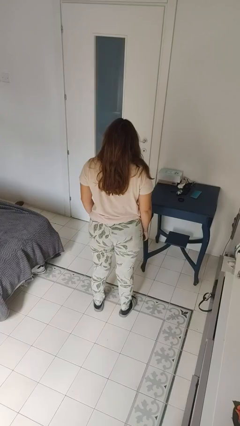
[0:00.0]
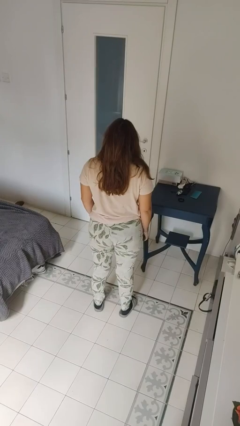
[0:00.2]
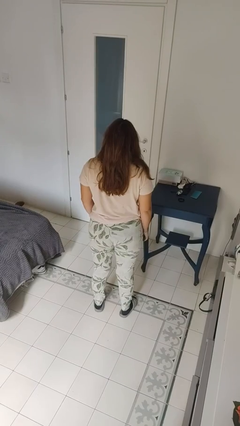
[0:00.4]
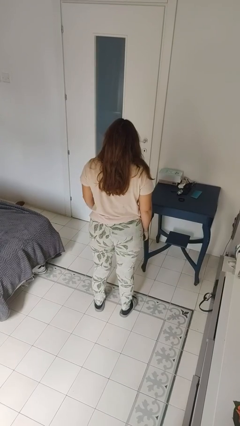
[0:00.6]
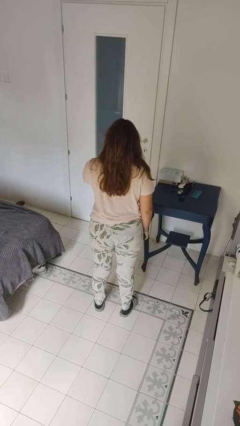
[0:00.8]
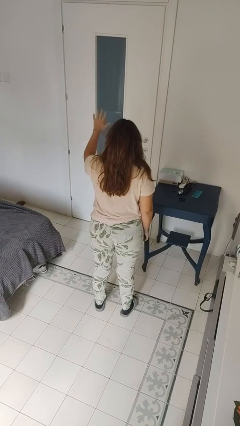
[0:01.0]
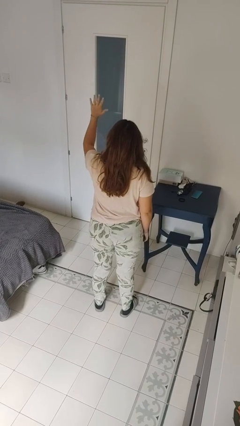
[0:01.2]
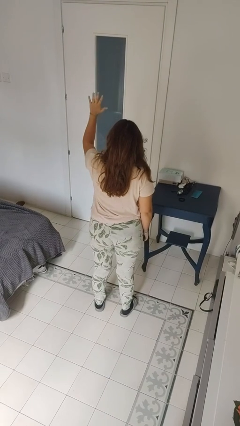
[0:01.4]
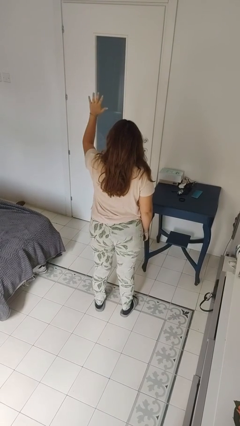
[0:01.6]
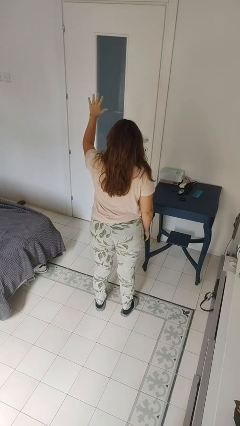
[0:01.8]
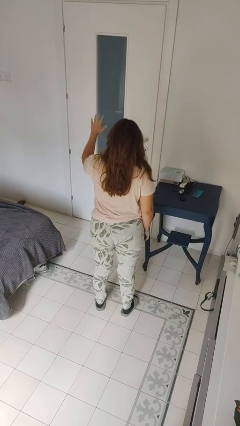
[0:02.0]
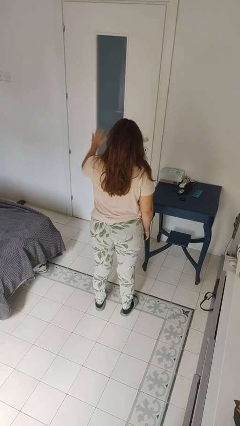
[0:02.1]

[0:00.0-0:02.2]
person gestures number five

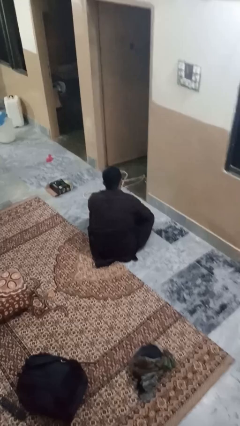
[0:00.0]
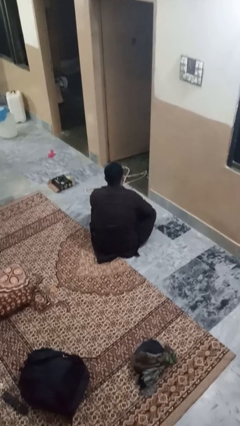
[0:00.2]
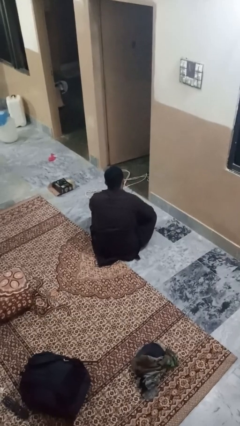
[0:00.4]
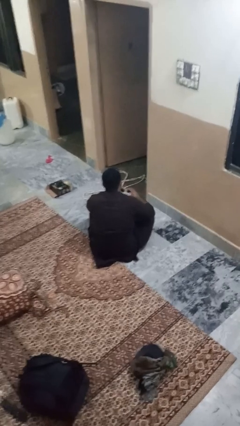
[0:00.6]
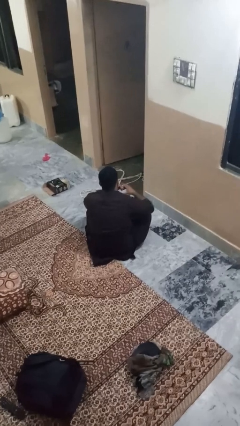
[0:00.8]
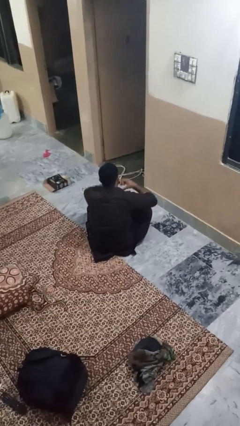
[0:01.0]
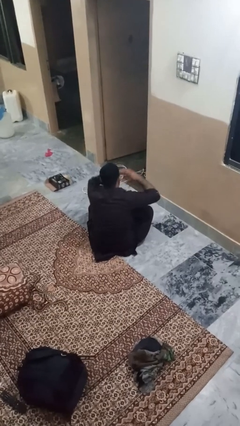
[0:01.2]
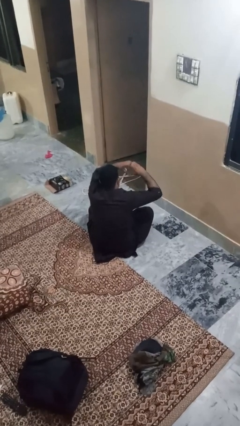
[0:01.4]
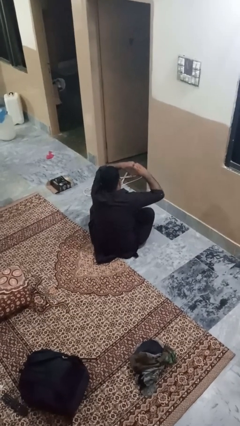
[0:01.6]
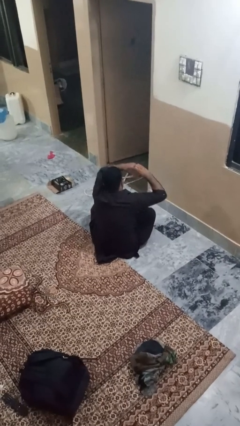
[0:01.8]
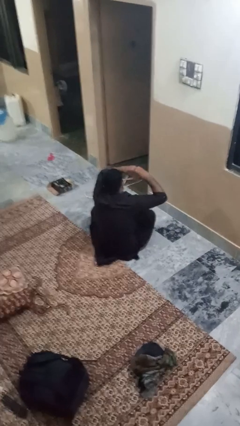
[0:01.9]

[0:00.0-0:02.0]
person gestures heart

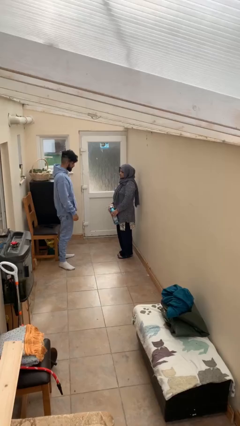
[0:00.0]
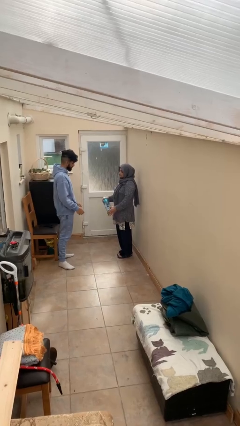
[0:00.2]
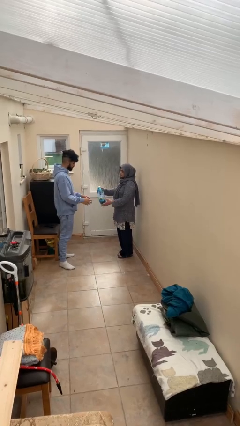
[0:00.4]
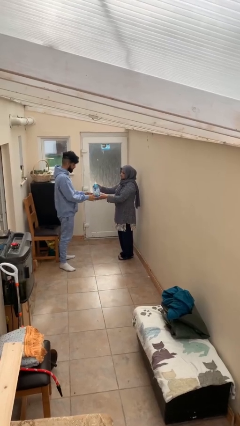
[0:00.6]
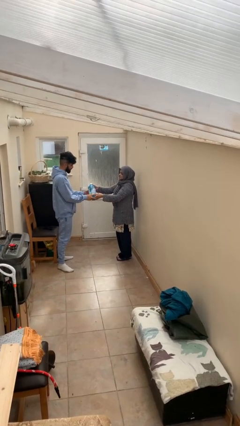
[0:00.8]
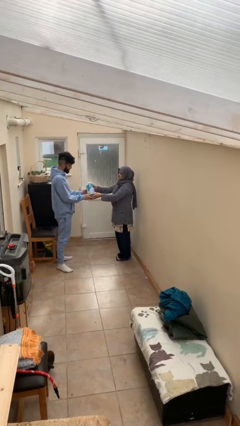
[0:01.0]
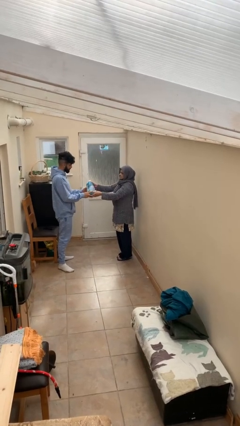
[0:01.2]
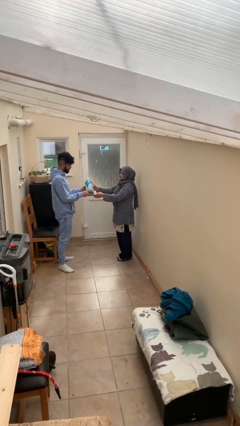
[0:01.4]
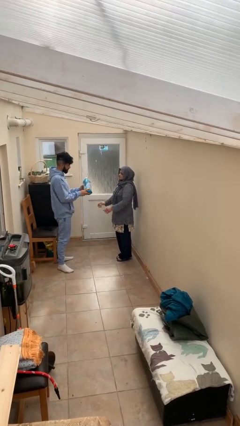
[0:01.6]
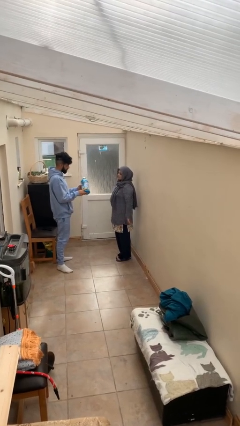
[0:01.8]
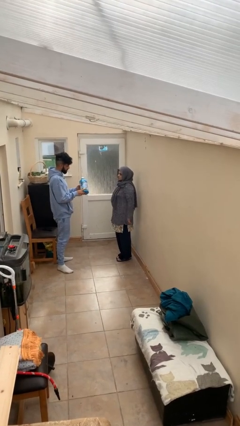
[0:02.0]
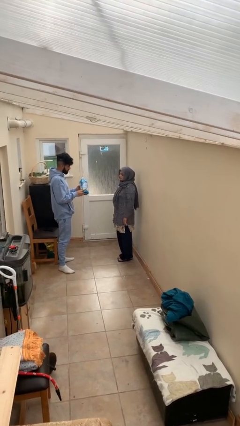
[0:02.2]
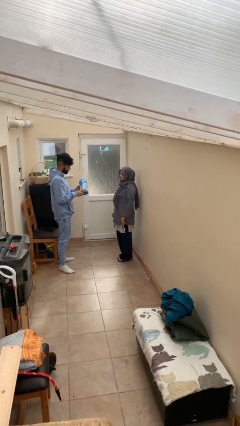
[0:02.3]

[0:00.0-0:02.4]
person transfers object to person

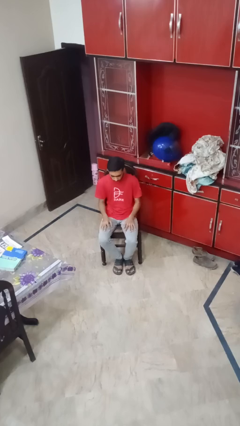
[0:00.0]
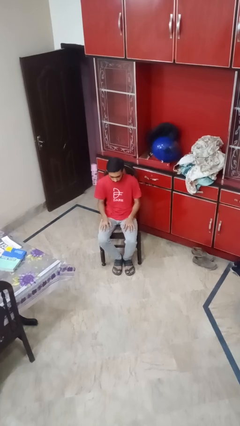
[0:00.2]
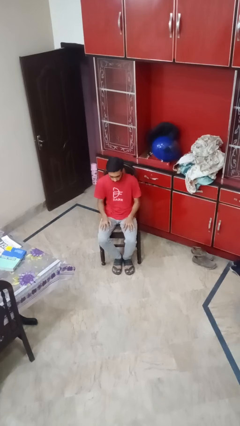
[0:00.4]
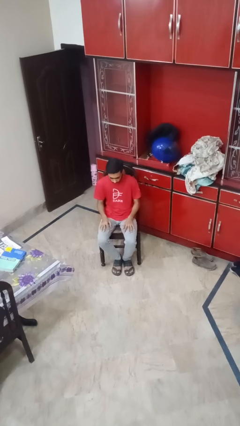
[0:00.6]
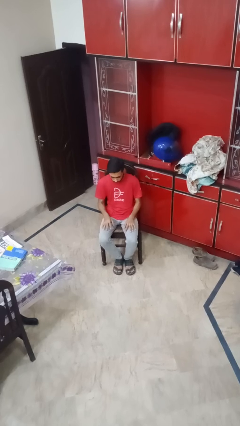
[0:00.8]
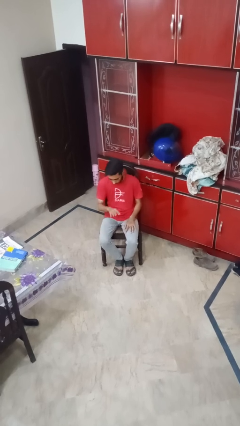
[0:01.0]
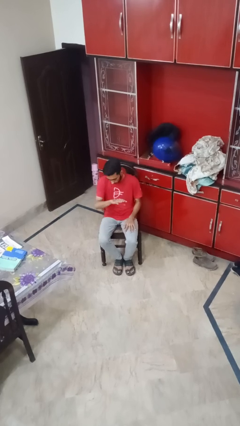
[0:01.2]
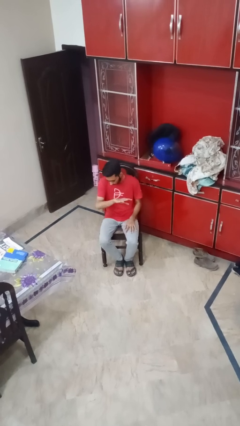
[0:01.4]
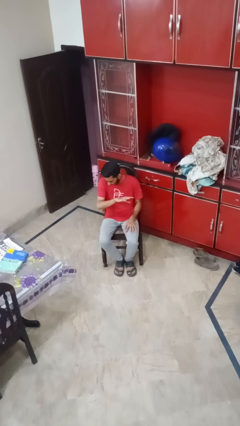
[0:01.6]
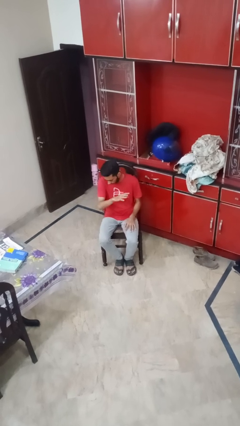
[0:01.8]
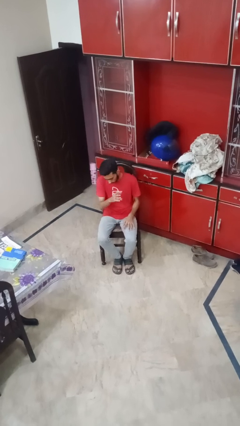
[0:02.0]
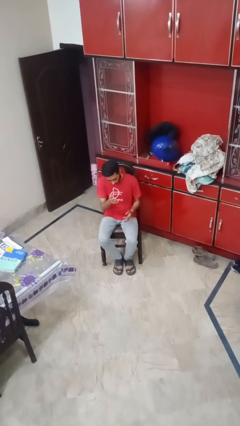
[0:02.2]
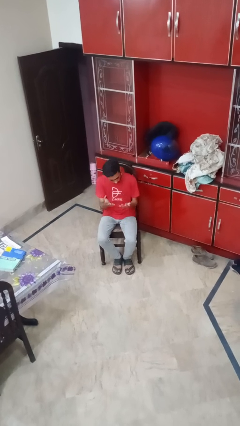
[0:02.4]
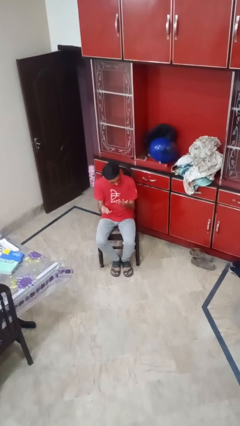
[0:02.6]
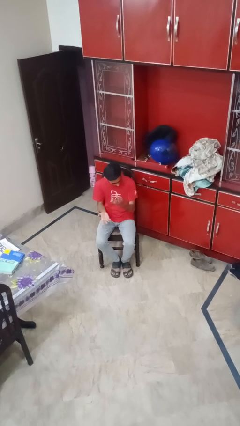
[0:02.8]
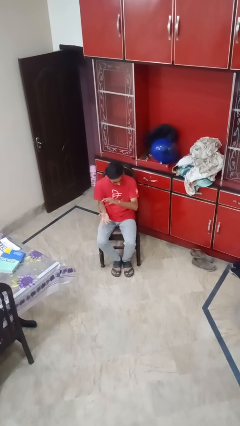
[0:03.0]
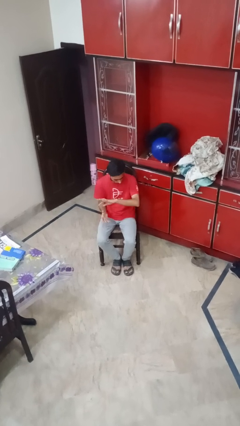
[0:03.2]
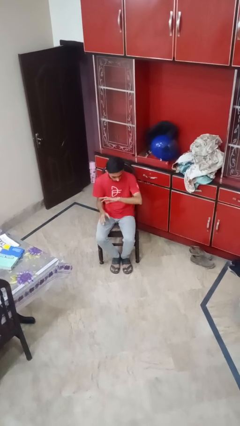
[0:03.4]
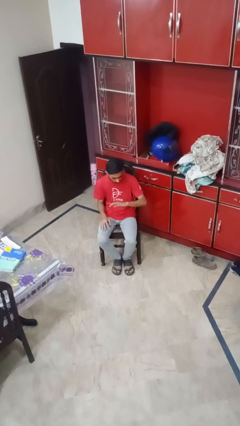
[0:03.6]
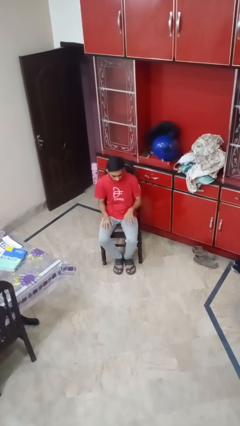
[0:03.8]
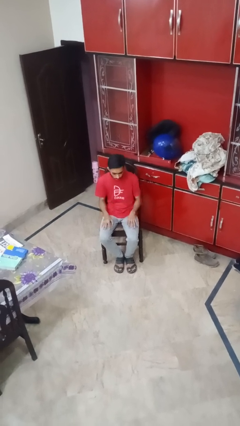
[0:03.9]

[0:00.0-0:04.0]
person looks at hands in lap

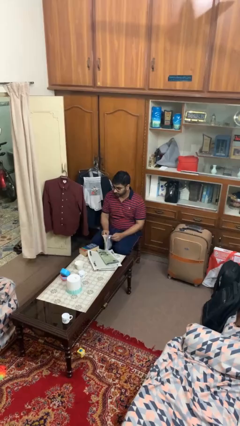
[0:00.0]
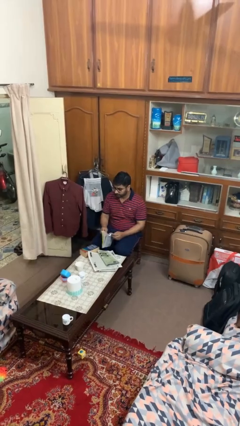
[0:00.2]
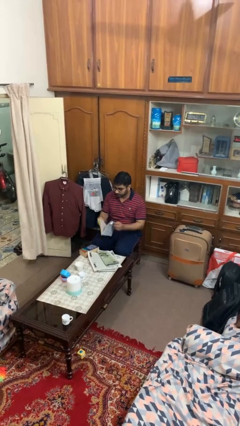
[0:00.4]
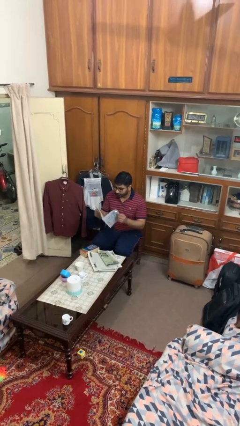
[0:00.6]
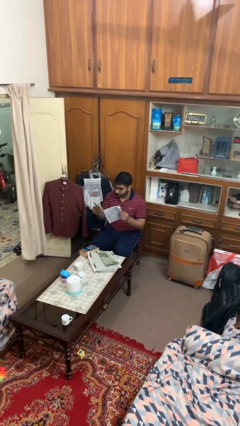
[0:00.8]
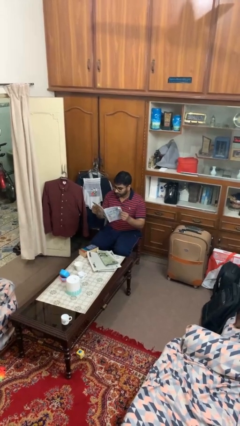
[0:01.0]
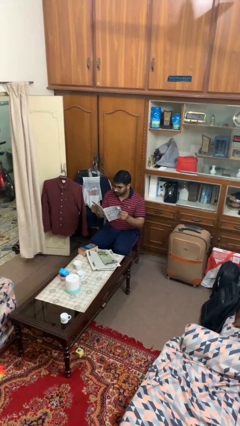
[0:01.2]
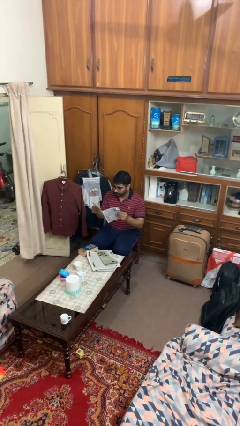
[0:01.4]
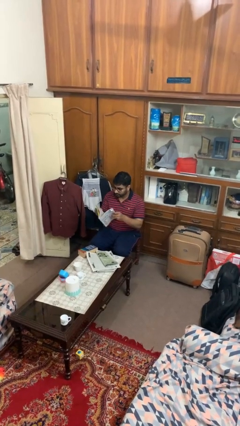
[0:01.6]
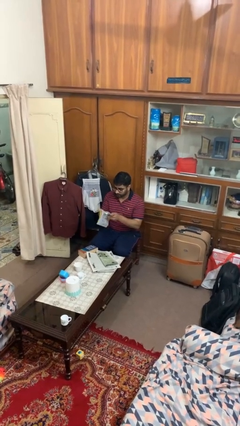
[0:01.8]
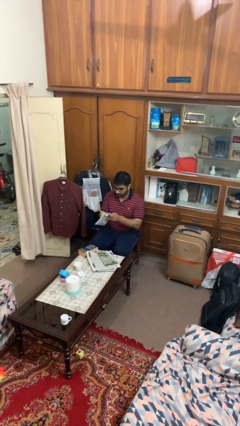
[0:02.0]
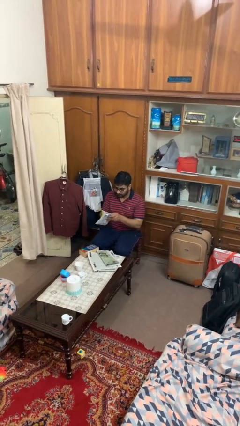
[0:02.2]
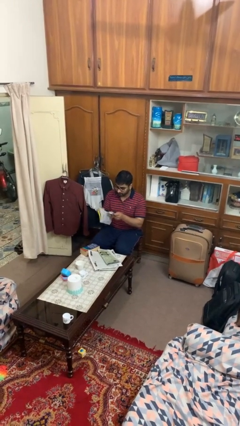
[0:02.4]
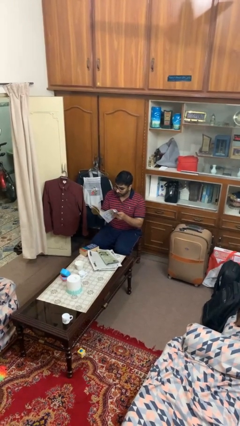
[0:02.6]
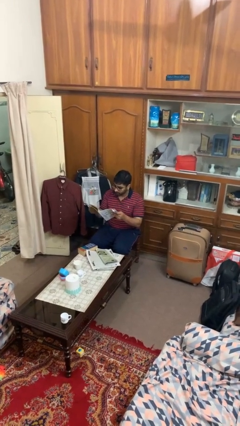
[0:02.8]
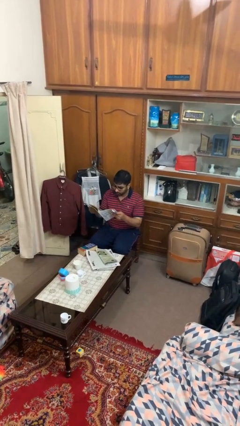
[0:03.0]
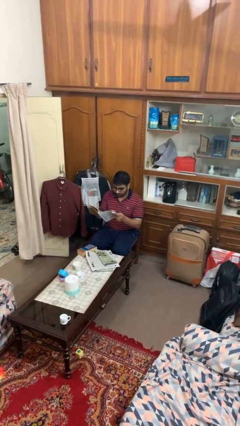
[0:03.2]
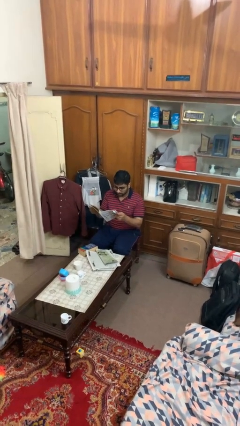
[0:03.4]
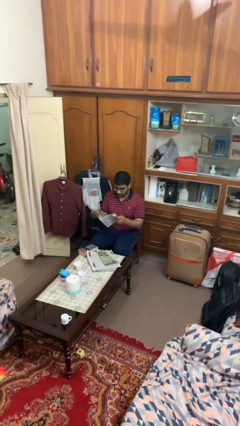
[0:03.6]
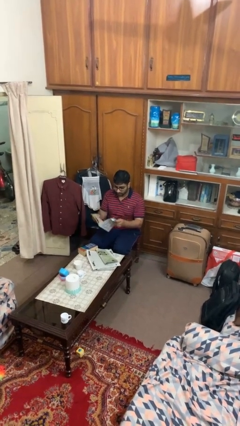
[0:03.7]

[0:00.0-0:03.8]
person reads magazine

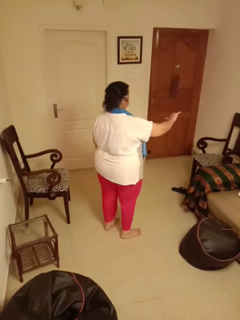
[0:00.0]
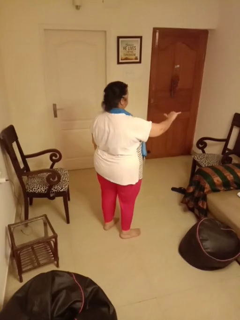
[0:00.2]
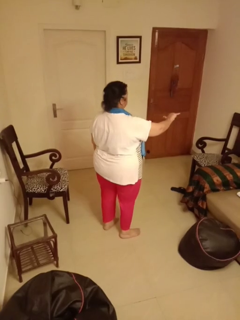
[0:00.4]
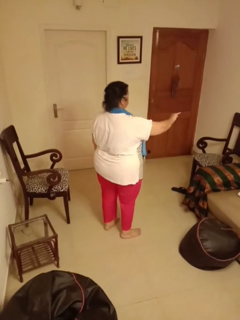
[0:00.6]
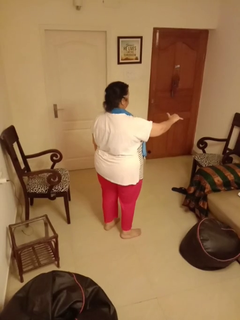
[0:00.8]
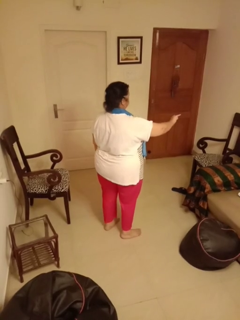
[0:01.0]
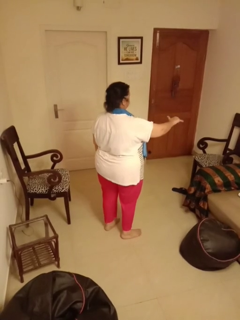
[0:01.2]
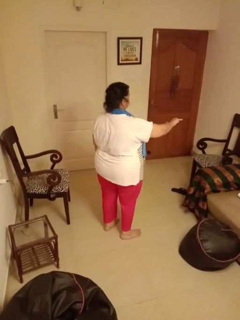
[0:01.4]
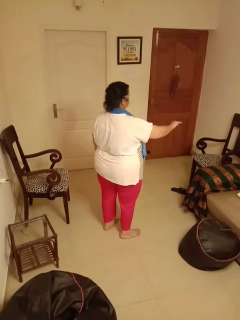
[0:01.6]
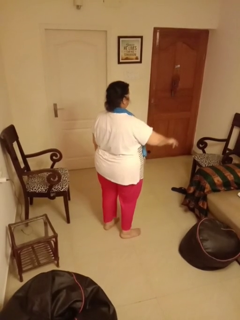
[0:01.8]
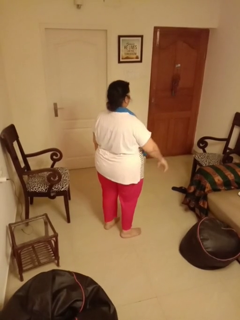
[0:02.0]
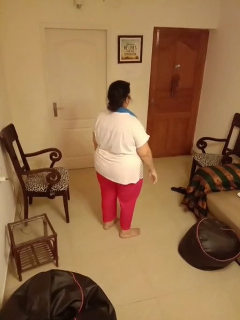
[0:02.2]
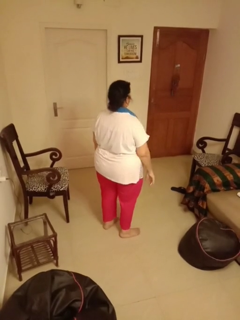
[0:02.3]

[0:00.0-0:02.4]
person gestures hang loose

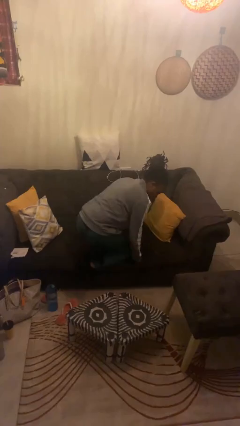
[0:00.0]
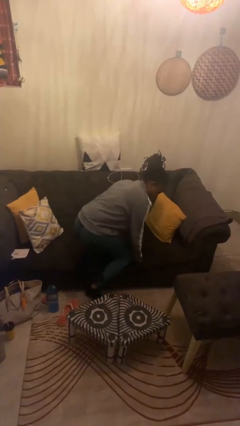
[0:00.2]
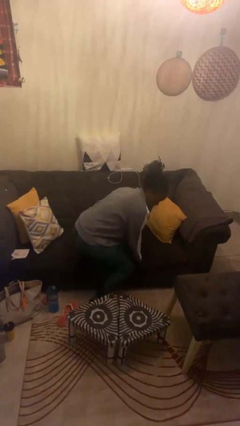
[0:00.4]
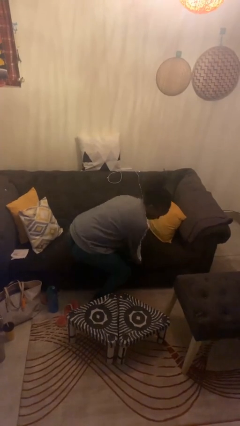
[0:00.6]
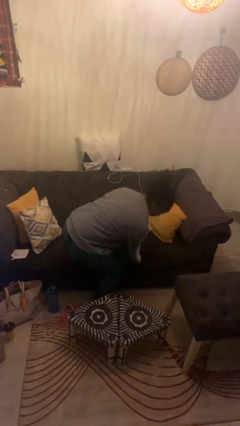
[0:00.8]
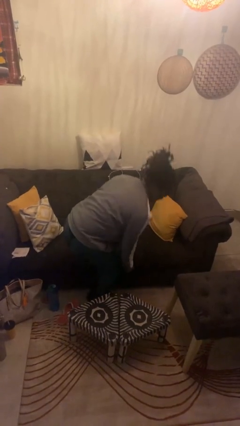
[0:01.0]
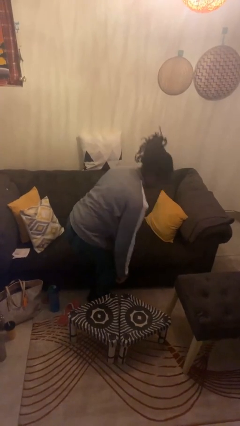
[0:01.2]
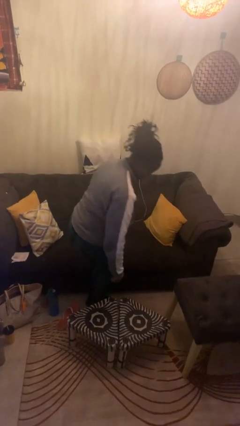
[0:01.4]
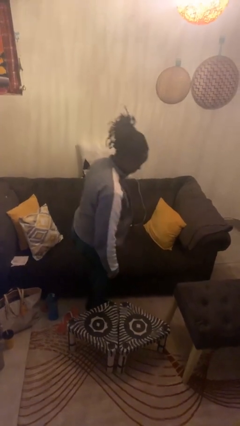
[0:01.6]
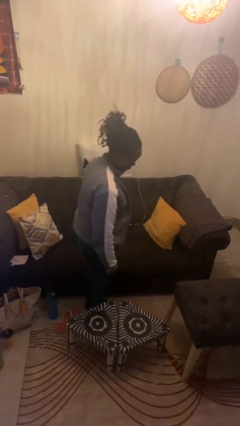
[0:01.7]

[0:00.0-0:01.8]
person climbs off couch
